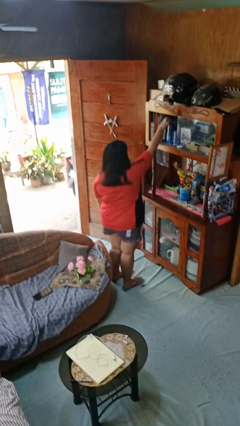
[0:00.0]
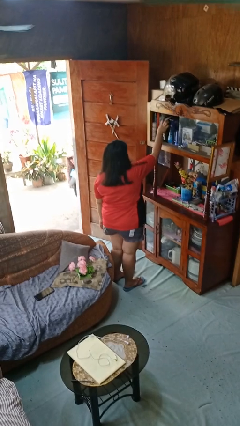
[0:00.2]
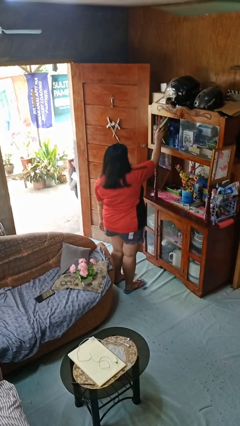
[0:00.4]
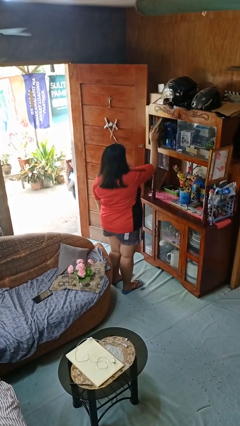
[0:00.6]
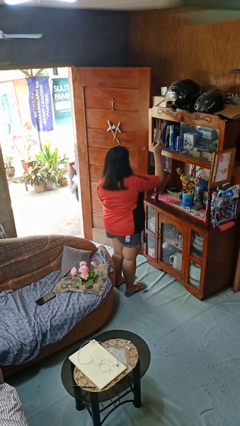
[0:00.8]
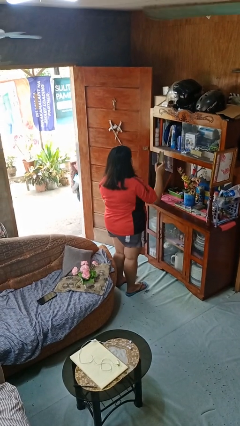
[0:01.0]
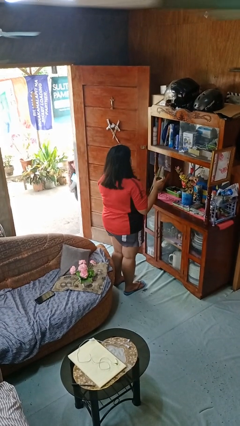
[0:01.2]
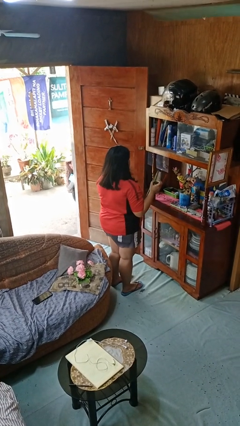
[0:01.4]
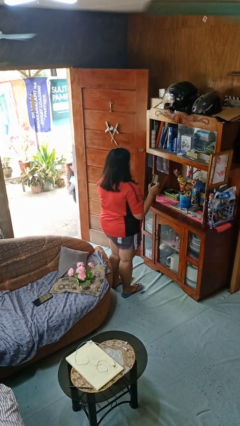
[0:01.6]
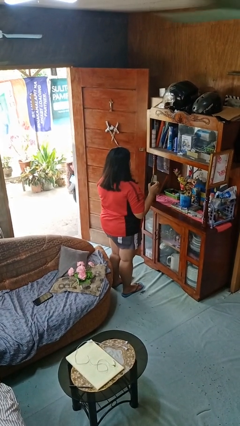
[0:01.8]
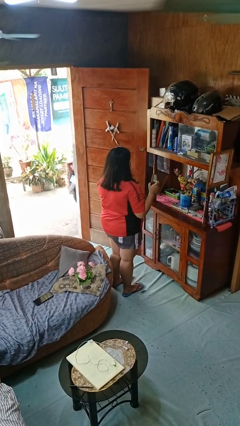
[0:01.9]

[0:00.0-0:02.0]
person picks up object from shelf

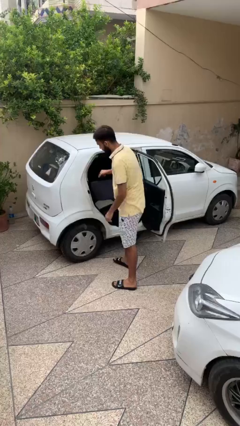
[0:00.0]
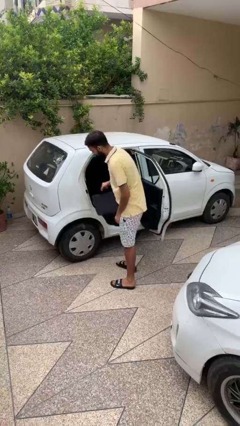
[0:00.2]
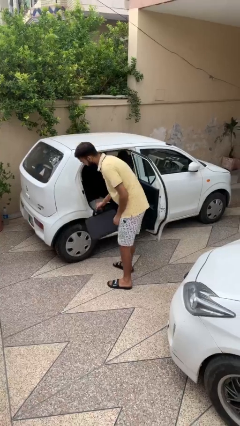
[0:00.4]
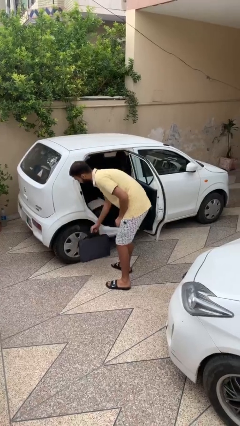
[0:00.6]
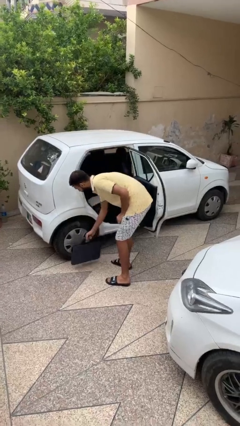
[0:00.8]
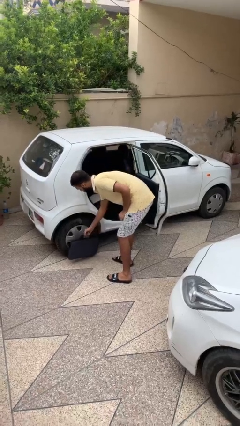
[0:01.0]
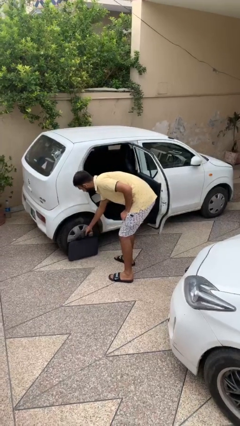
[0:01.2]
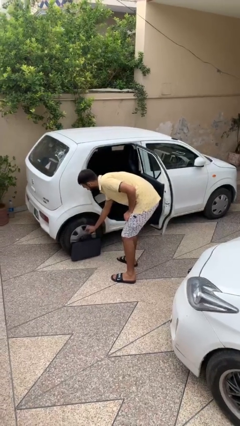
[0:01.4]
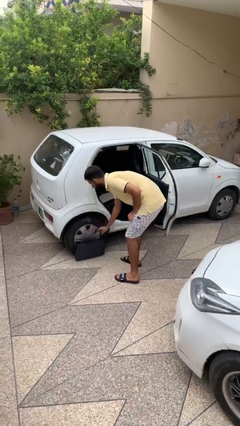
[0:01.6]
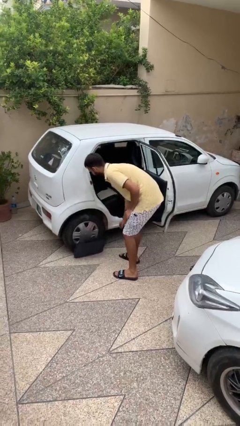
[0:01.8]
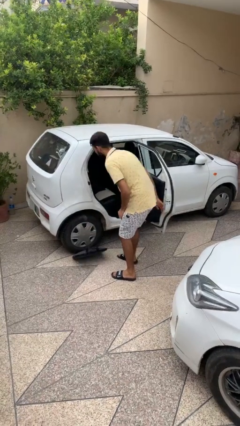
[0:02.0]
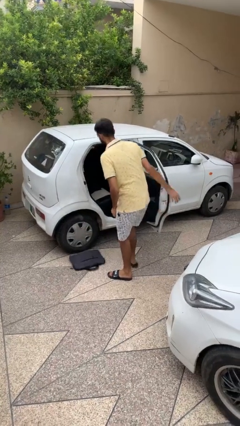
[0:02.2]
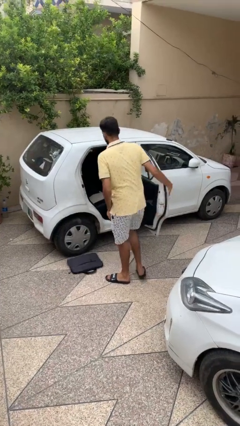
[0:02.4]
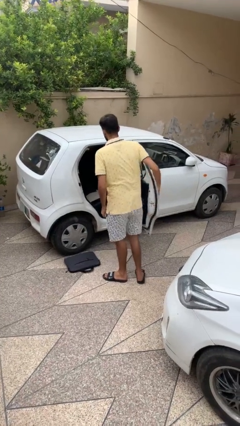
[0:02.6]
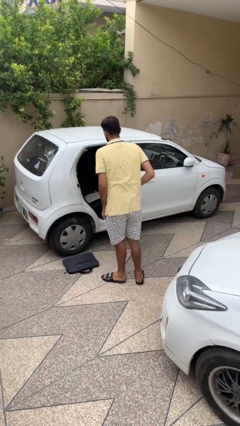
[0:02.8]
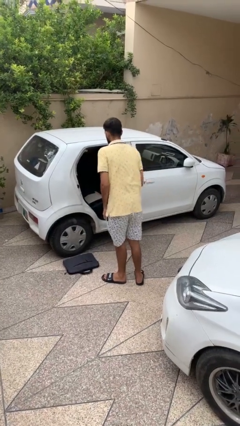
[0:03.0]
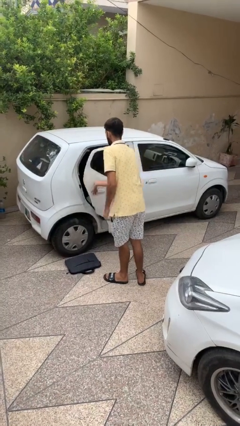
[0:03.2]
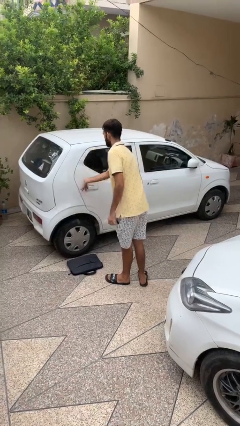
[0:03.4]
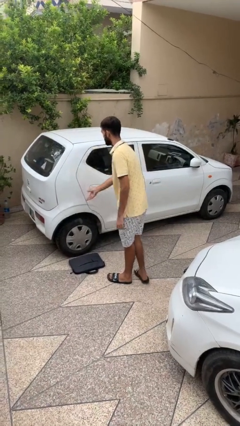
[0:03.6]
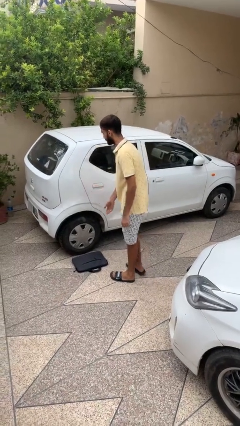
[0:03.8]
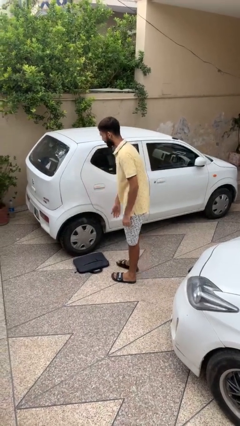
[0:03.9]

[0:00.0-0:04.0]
person closes car door

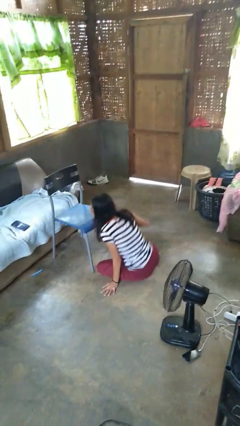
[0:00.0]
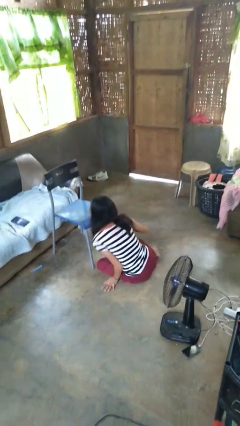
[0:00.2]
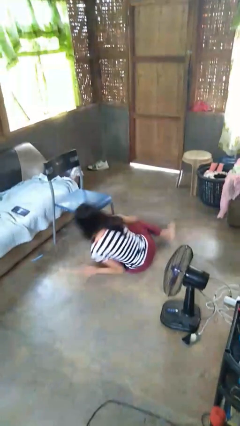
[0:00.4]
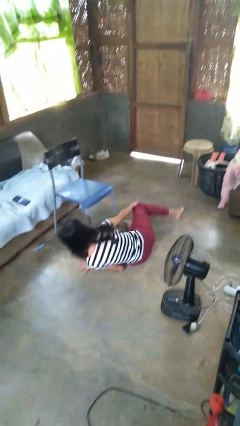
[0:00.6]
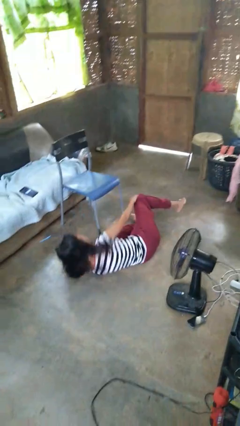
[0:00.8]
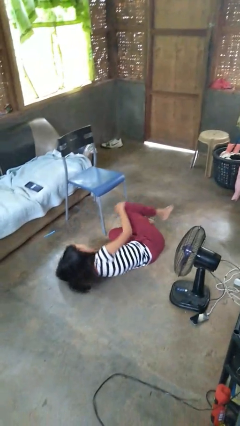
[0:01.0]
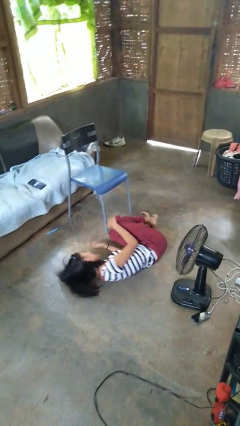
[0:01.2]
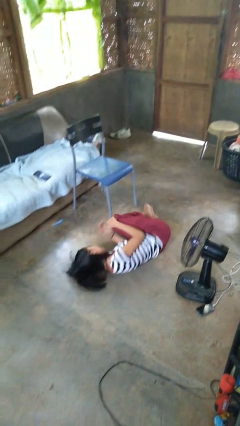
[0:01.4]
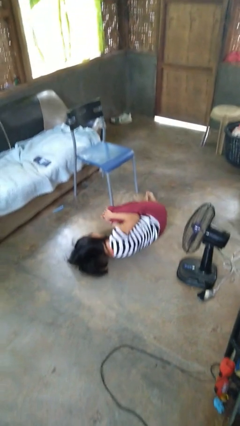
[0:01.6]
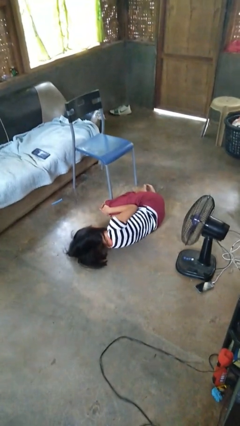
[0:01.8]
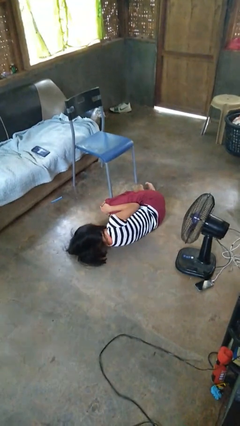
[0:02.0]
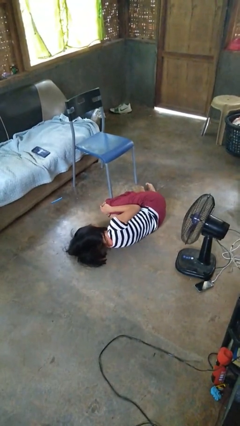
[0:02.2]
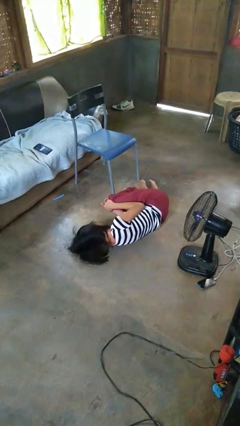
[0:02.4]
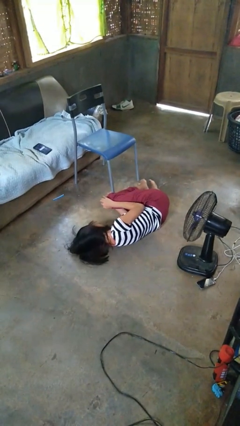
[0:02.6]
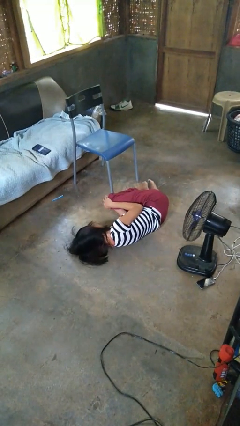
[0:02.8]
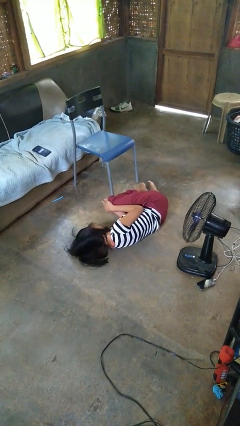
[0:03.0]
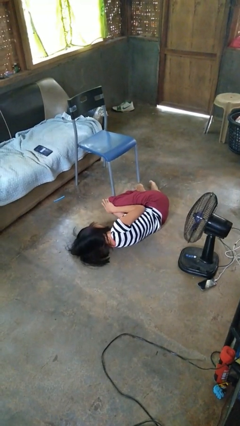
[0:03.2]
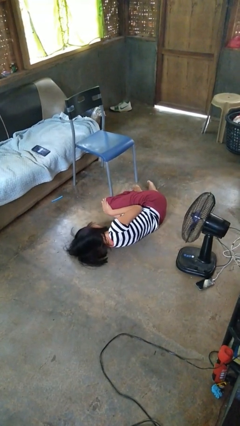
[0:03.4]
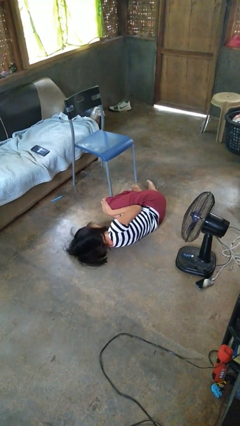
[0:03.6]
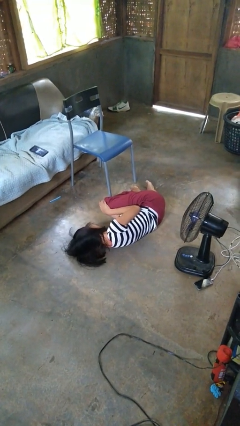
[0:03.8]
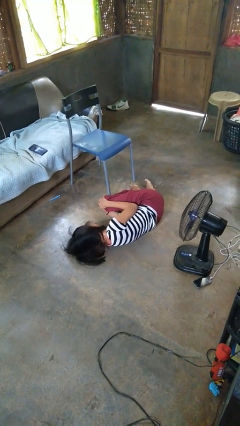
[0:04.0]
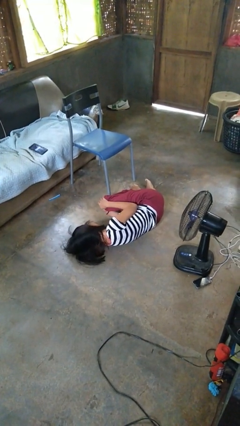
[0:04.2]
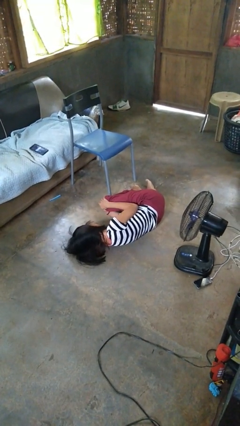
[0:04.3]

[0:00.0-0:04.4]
person lies down on floor

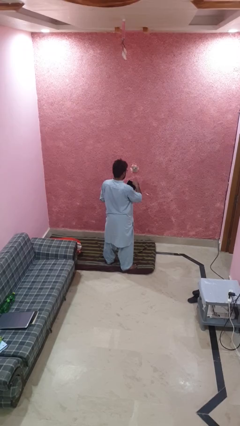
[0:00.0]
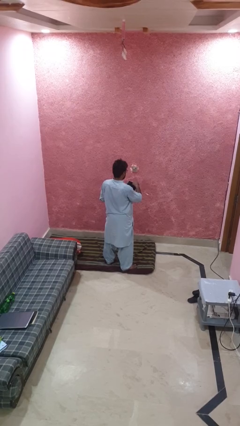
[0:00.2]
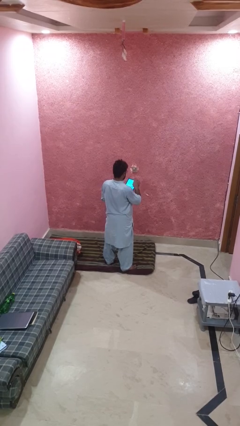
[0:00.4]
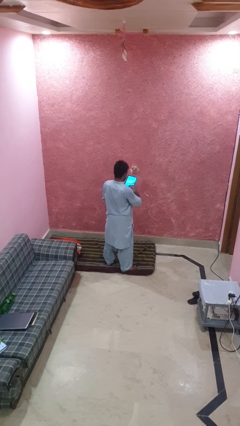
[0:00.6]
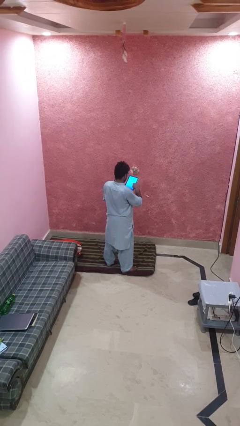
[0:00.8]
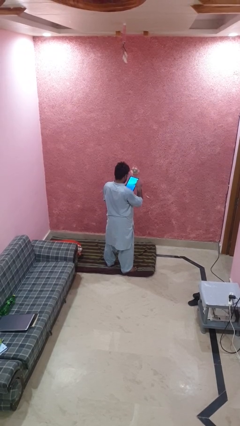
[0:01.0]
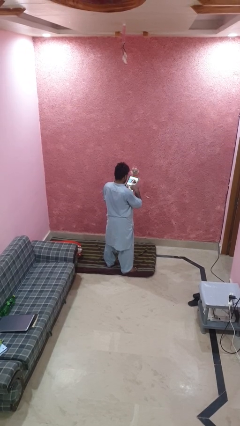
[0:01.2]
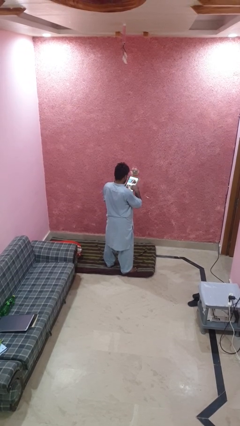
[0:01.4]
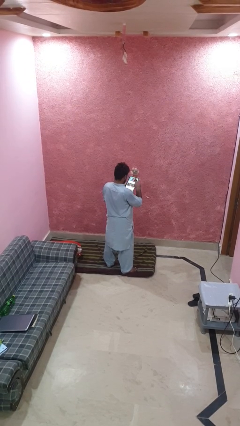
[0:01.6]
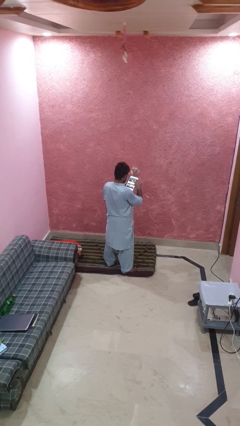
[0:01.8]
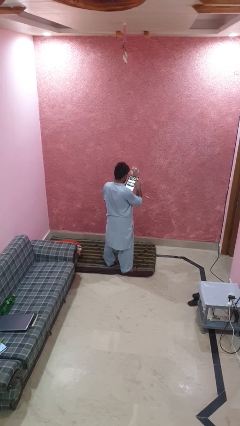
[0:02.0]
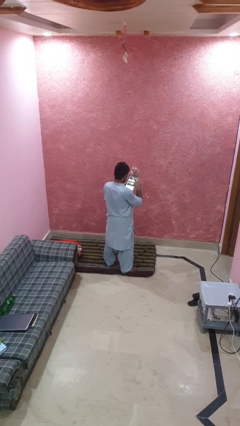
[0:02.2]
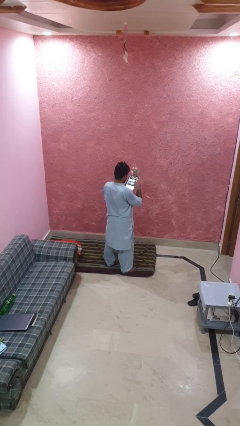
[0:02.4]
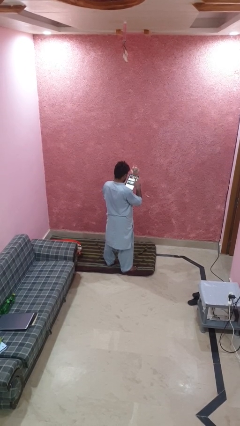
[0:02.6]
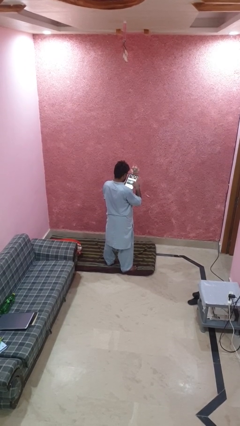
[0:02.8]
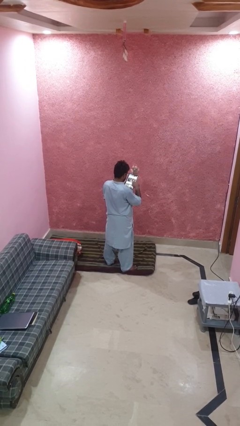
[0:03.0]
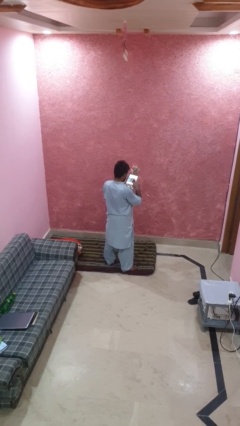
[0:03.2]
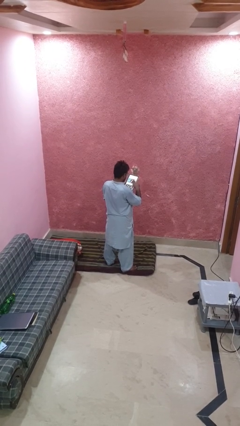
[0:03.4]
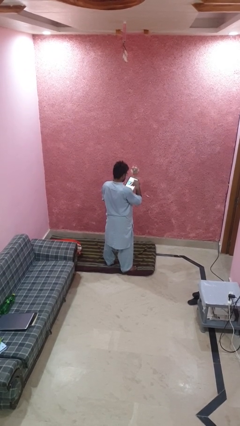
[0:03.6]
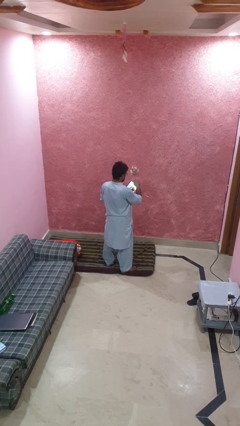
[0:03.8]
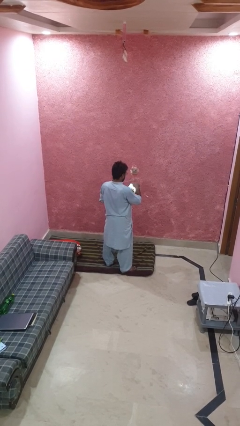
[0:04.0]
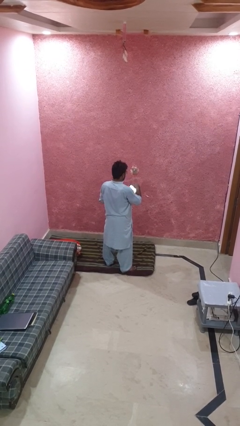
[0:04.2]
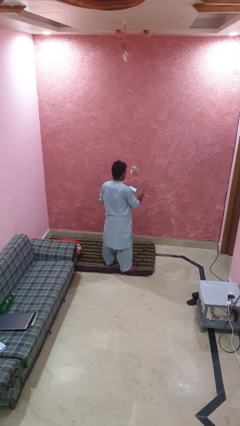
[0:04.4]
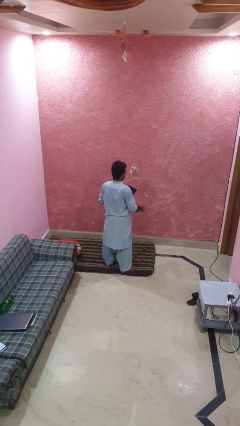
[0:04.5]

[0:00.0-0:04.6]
person interacts with tablet

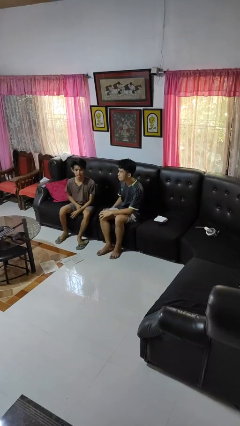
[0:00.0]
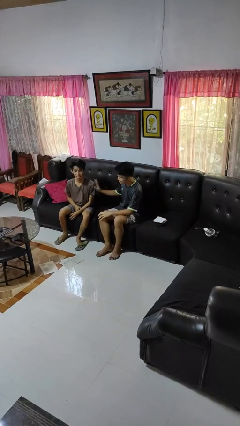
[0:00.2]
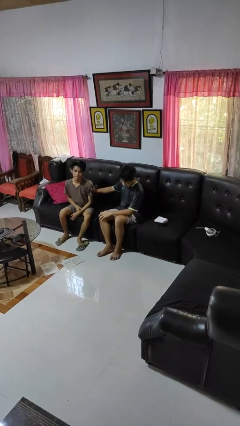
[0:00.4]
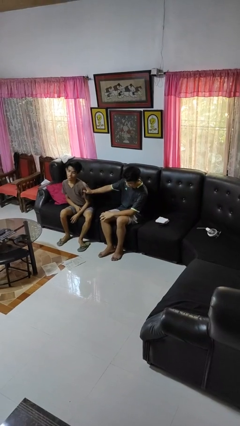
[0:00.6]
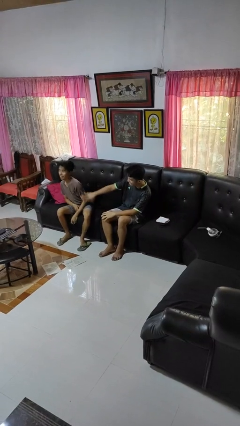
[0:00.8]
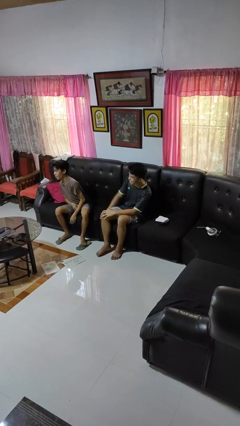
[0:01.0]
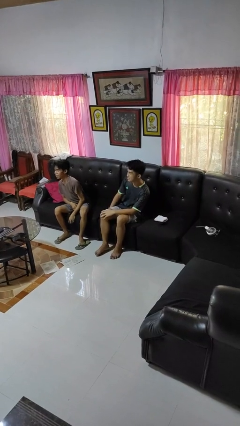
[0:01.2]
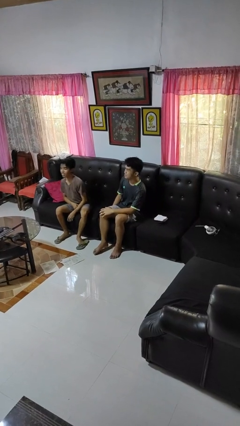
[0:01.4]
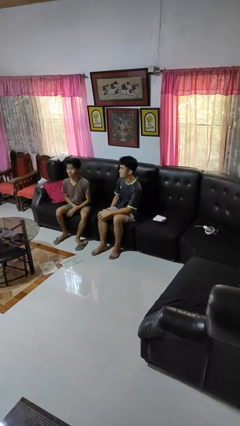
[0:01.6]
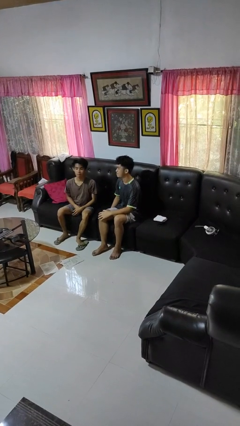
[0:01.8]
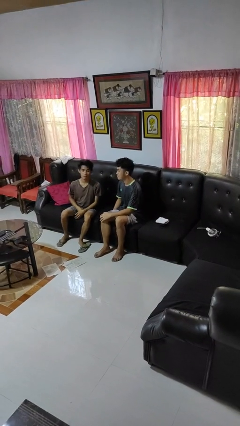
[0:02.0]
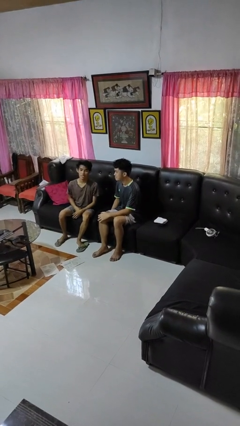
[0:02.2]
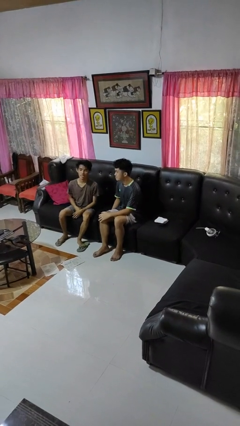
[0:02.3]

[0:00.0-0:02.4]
person shoves person
